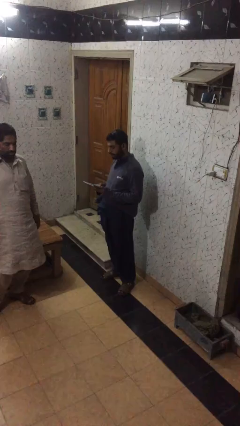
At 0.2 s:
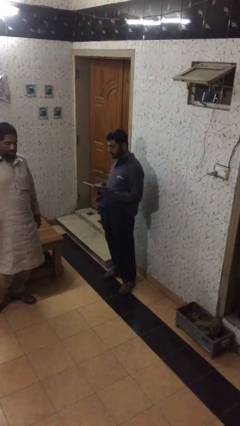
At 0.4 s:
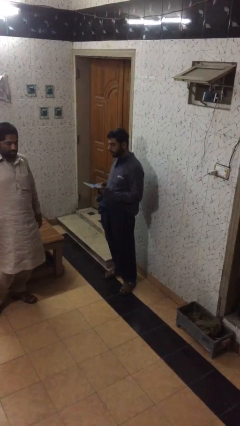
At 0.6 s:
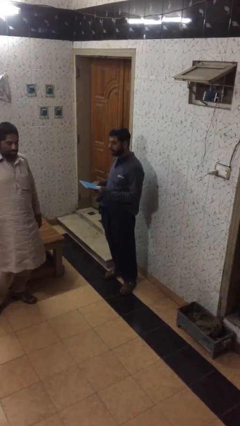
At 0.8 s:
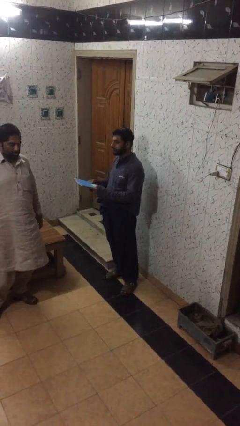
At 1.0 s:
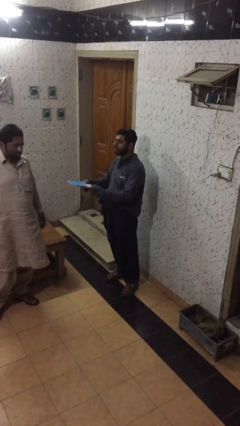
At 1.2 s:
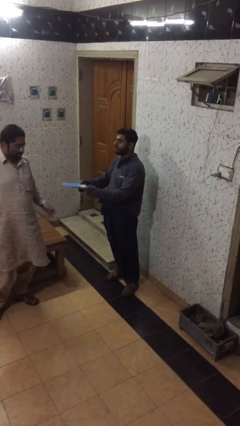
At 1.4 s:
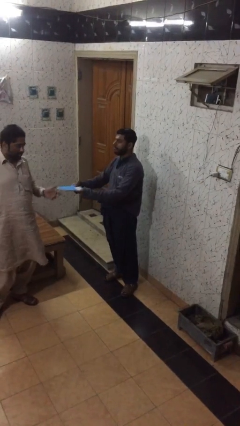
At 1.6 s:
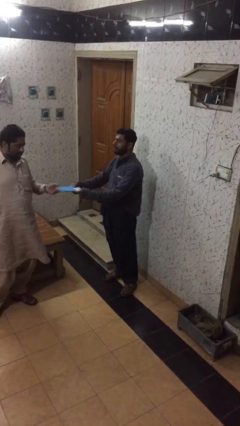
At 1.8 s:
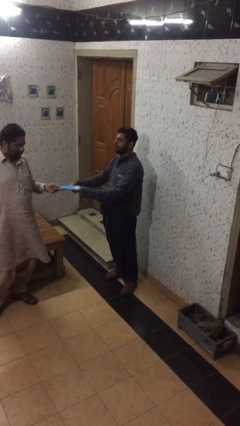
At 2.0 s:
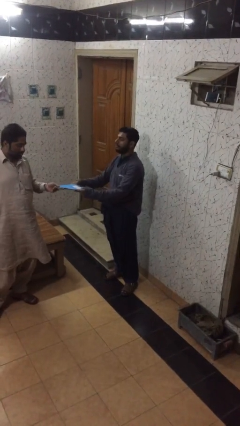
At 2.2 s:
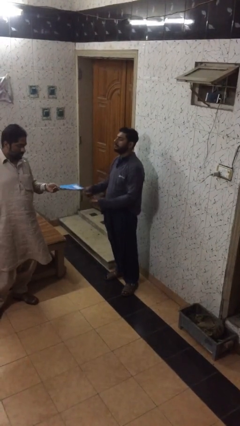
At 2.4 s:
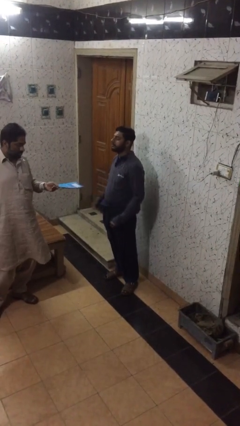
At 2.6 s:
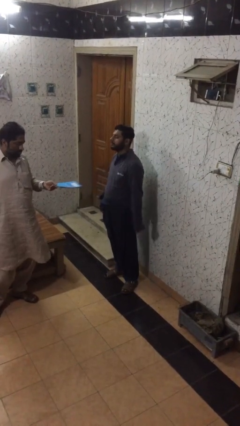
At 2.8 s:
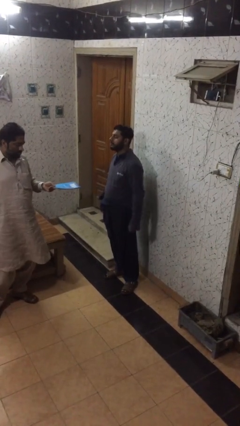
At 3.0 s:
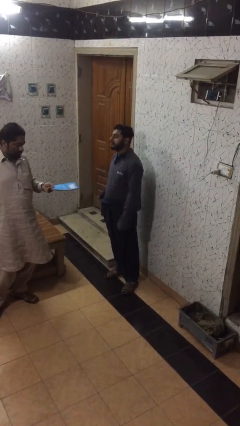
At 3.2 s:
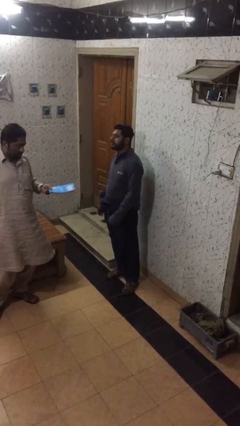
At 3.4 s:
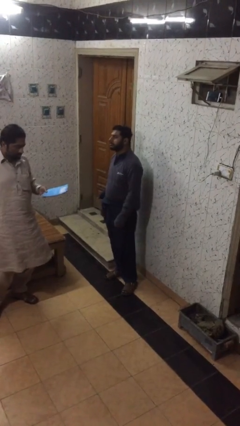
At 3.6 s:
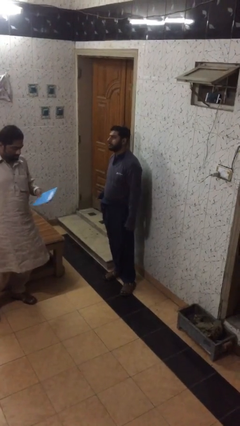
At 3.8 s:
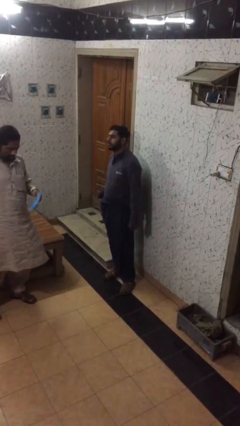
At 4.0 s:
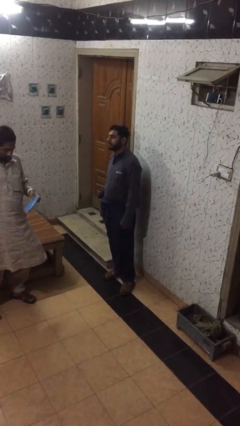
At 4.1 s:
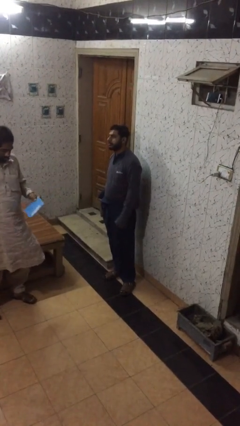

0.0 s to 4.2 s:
person transfers object to person

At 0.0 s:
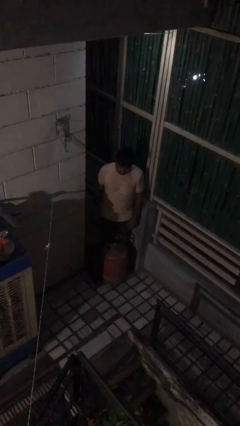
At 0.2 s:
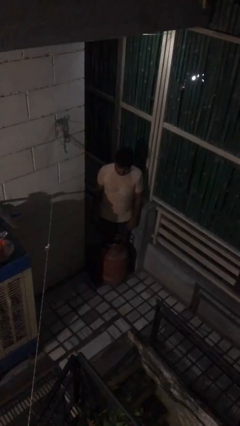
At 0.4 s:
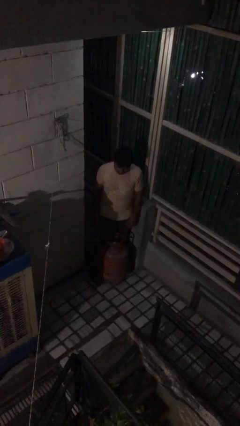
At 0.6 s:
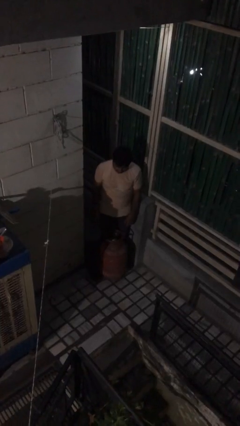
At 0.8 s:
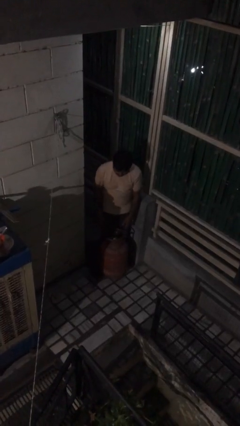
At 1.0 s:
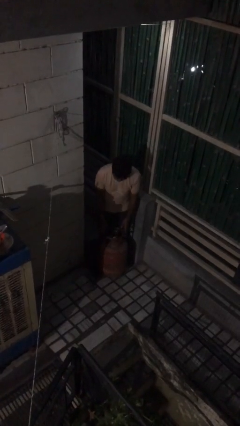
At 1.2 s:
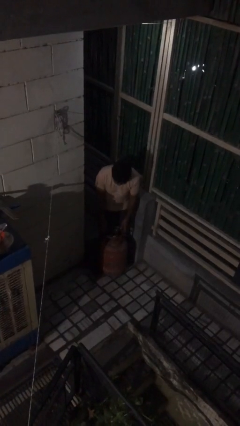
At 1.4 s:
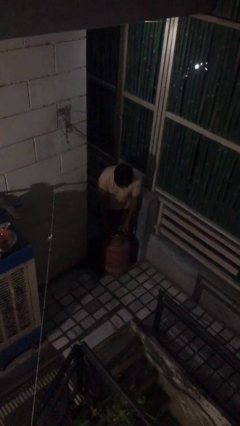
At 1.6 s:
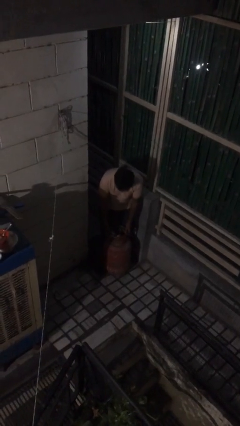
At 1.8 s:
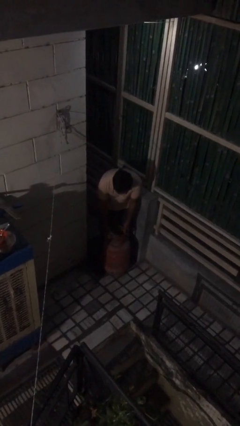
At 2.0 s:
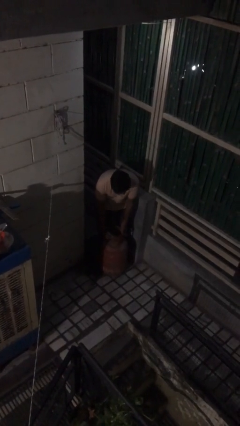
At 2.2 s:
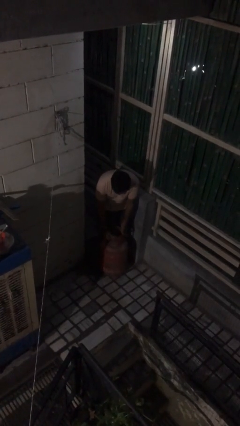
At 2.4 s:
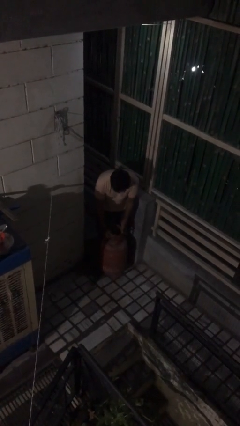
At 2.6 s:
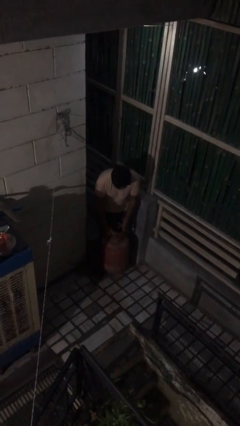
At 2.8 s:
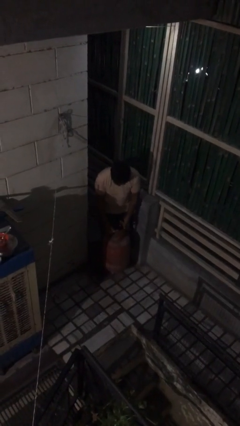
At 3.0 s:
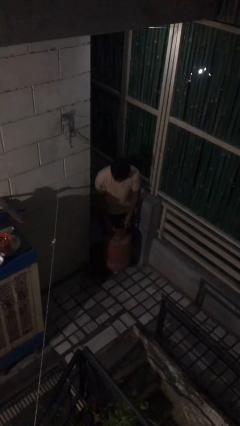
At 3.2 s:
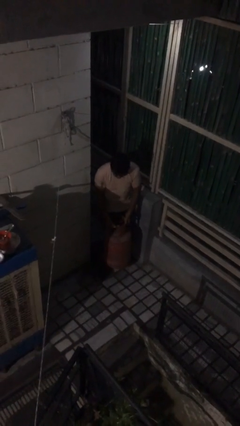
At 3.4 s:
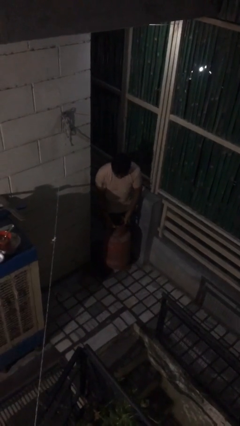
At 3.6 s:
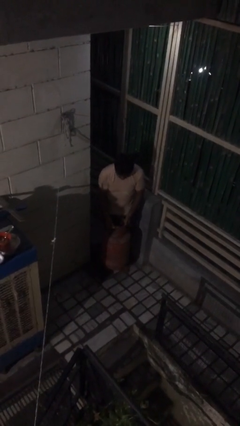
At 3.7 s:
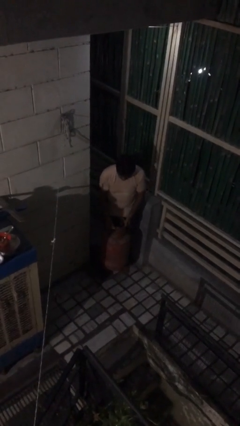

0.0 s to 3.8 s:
person picks up object from floor

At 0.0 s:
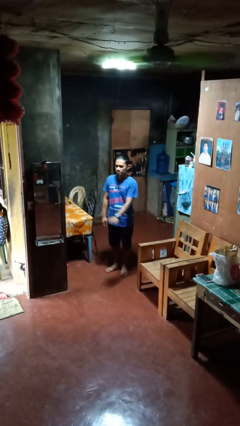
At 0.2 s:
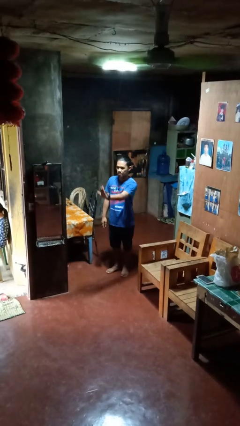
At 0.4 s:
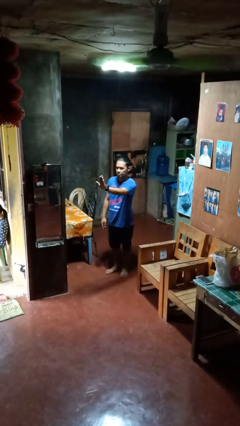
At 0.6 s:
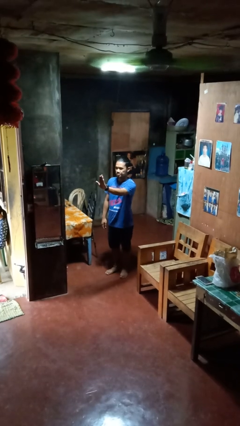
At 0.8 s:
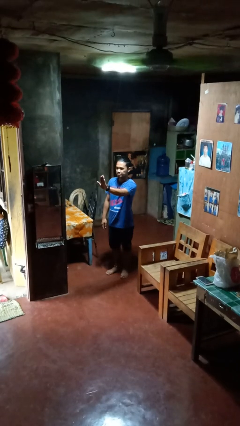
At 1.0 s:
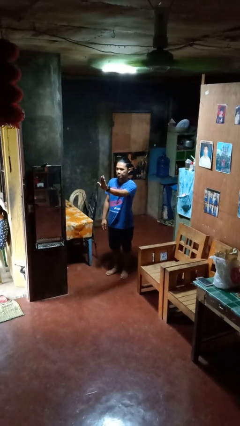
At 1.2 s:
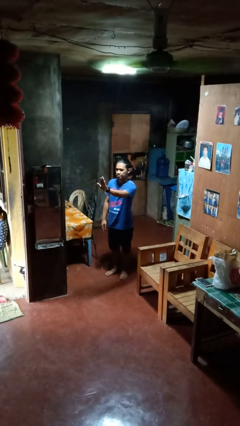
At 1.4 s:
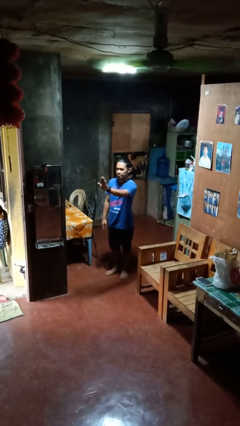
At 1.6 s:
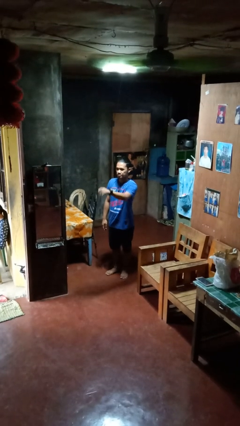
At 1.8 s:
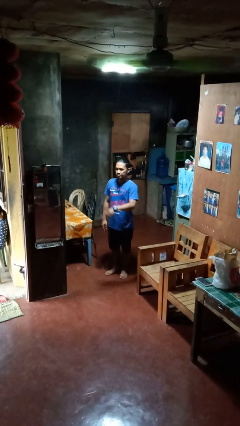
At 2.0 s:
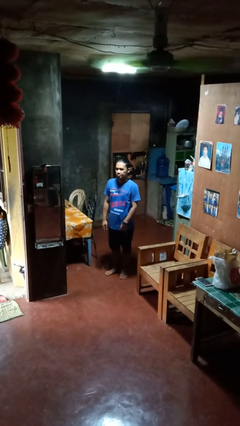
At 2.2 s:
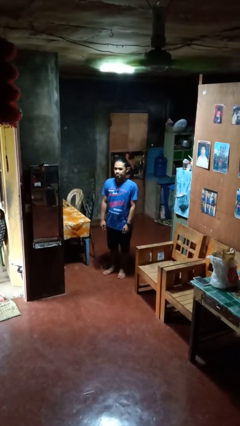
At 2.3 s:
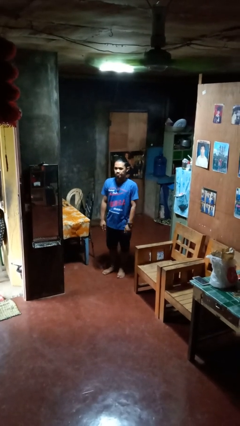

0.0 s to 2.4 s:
person gestures stop

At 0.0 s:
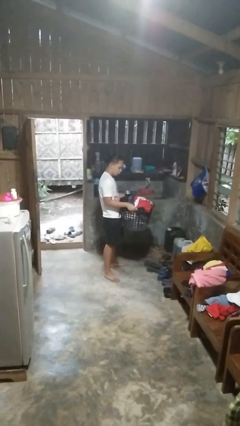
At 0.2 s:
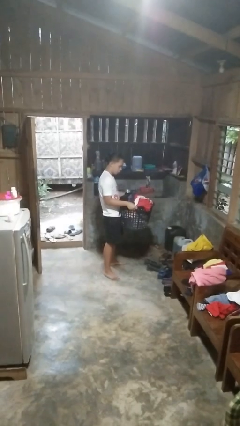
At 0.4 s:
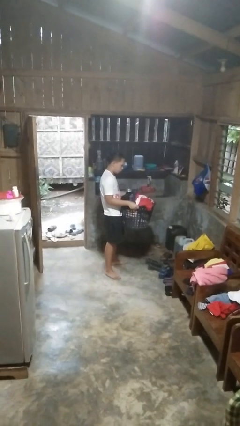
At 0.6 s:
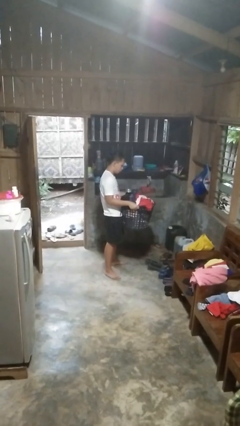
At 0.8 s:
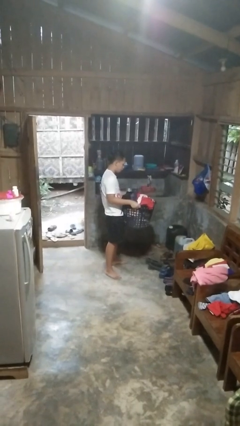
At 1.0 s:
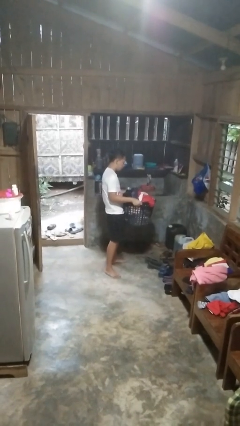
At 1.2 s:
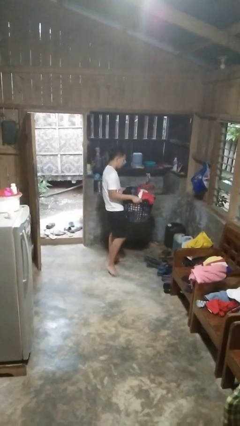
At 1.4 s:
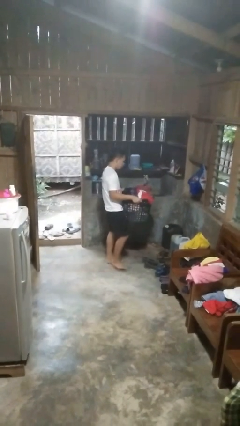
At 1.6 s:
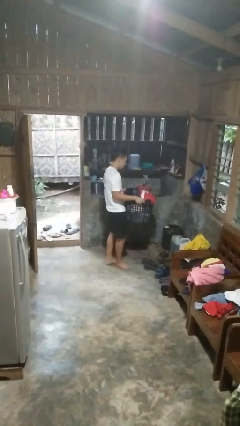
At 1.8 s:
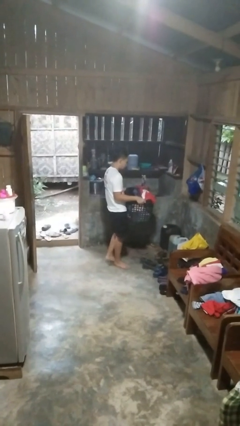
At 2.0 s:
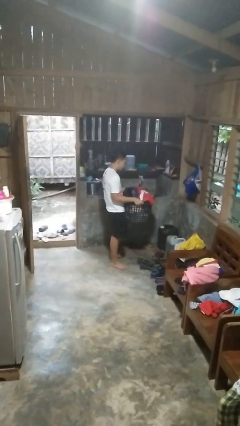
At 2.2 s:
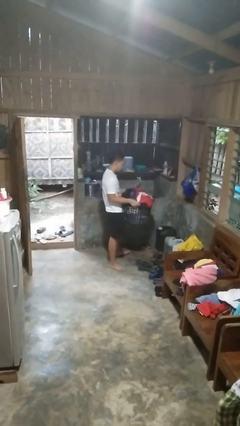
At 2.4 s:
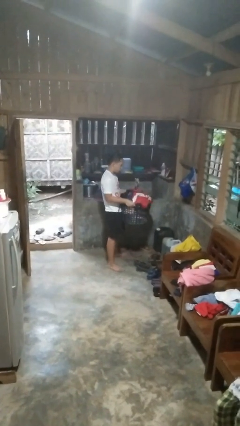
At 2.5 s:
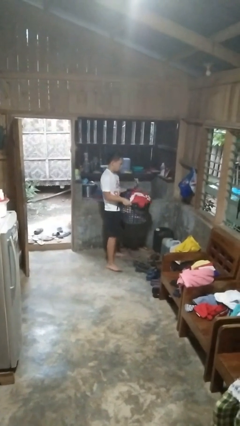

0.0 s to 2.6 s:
person carries laundry basket

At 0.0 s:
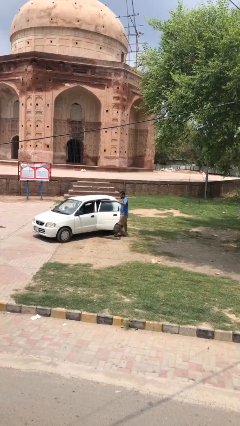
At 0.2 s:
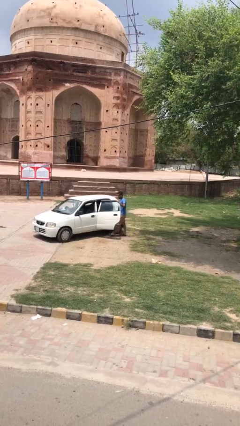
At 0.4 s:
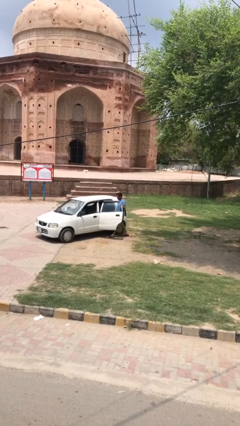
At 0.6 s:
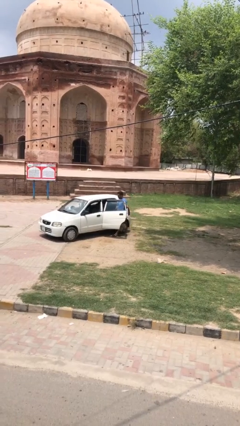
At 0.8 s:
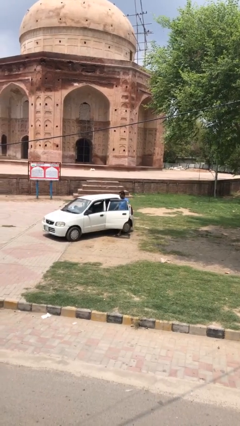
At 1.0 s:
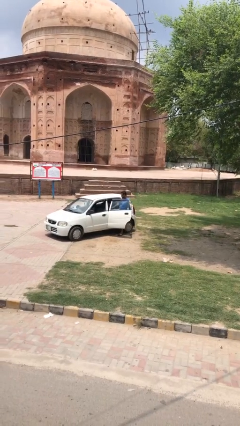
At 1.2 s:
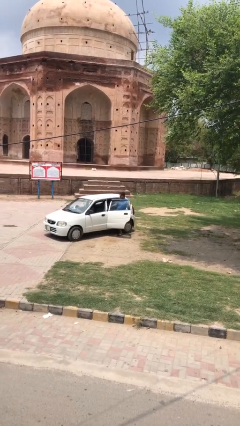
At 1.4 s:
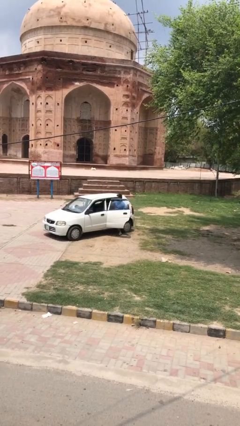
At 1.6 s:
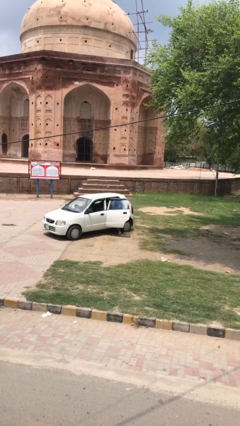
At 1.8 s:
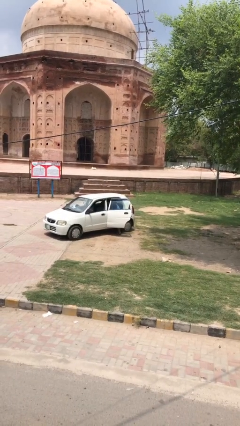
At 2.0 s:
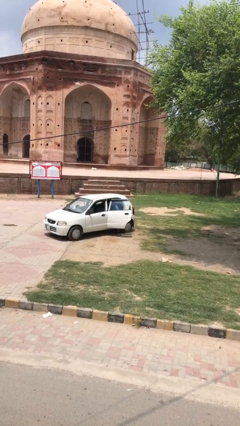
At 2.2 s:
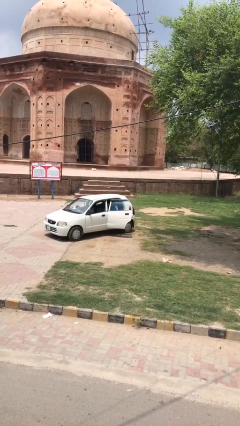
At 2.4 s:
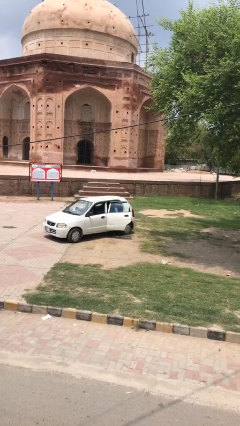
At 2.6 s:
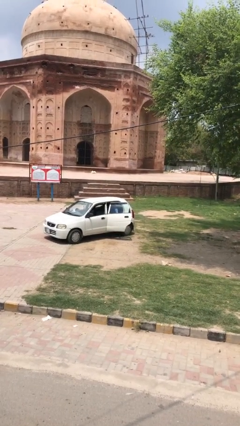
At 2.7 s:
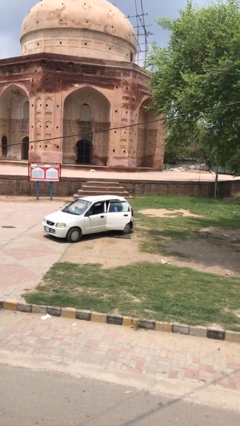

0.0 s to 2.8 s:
person enters car

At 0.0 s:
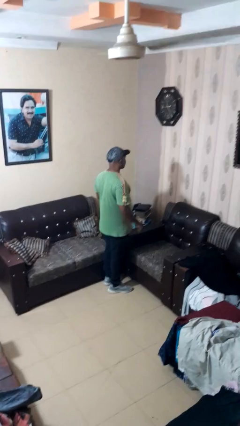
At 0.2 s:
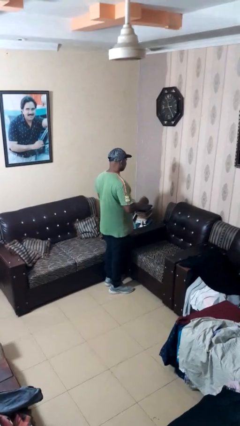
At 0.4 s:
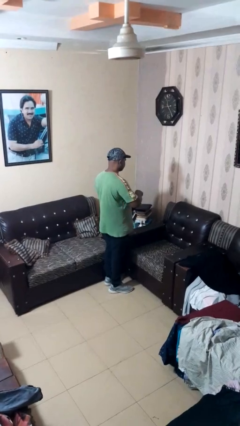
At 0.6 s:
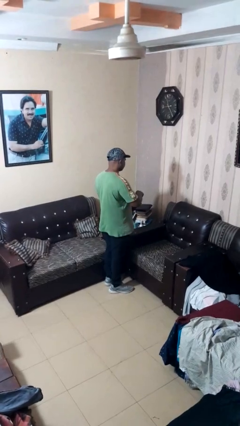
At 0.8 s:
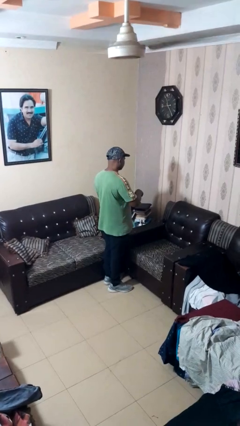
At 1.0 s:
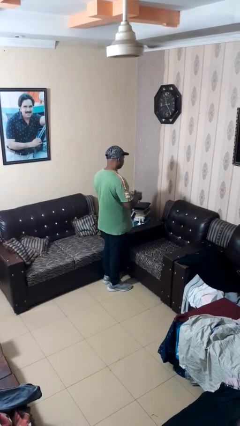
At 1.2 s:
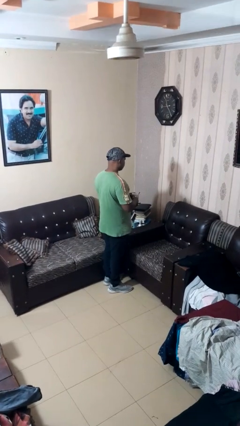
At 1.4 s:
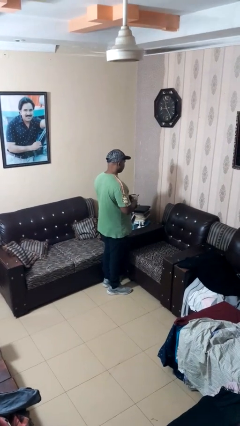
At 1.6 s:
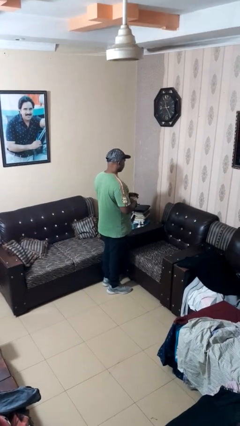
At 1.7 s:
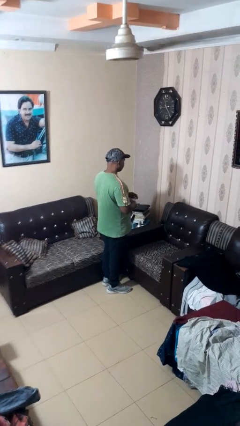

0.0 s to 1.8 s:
person stirs mug
